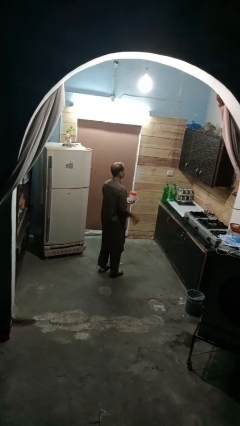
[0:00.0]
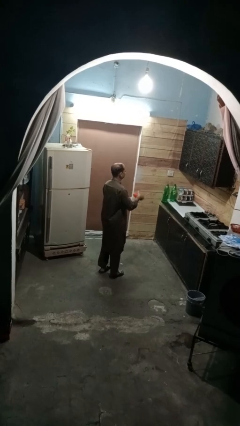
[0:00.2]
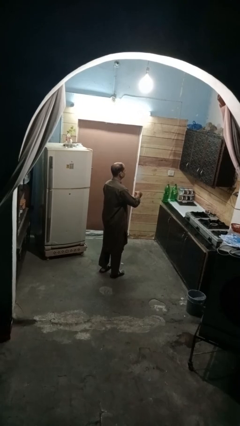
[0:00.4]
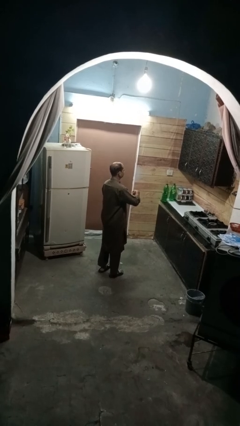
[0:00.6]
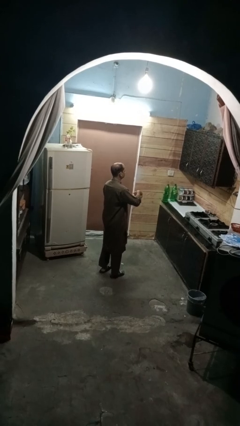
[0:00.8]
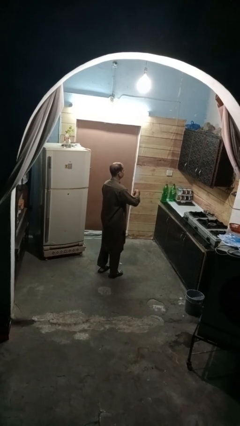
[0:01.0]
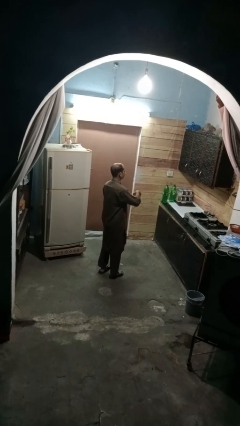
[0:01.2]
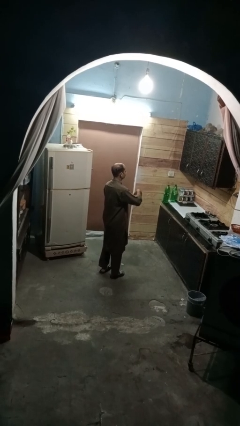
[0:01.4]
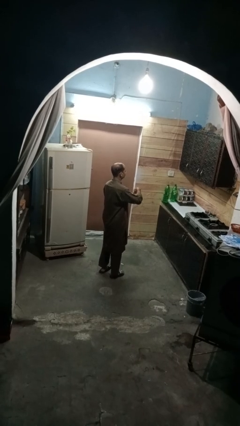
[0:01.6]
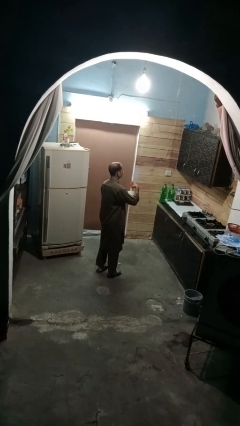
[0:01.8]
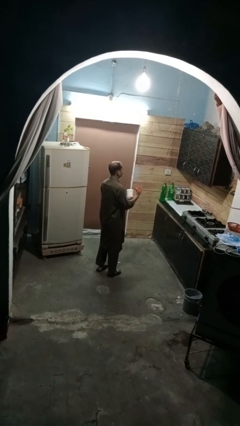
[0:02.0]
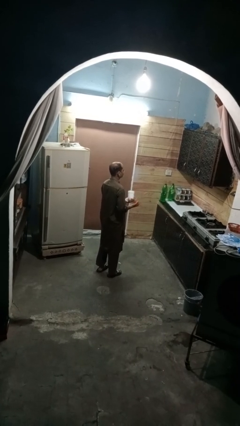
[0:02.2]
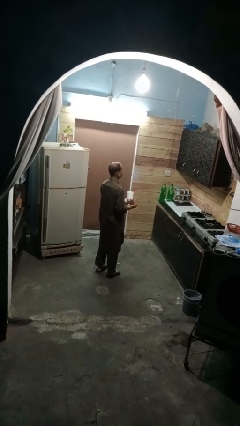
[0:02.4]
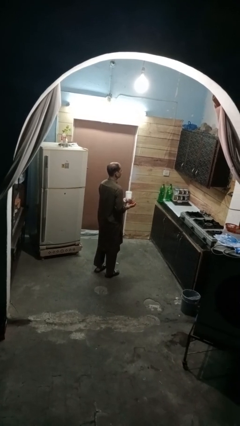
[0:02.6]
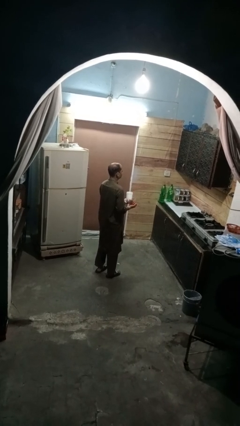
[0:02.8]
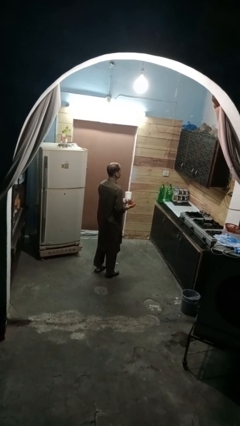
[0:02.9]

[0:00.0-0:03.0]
person opens jar

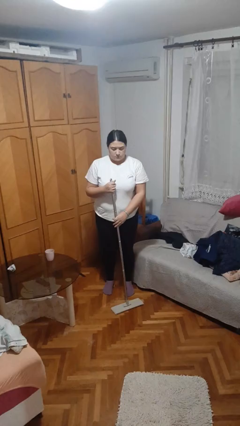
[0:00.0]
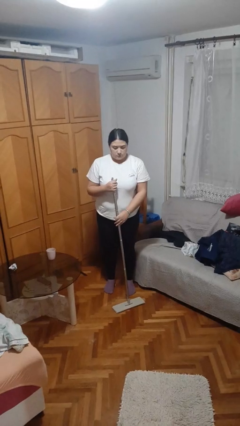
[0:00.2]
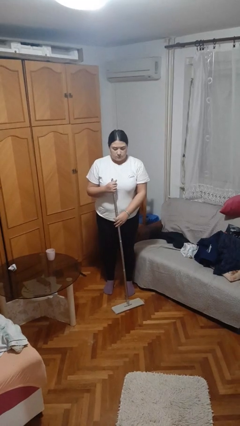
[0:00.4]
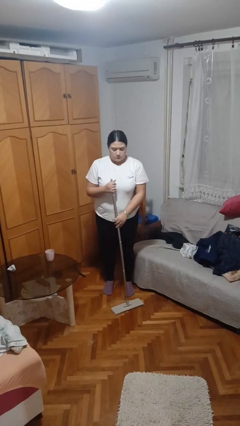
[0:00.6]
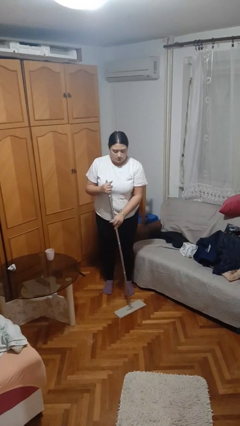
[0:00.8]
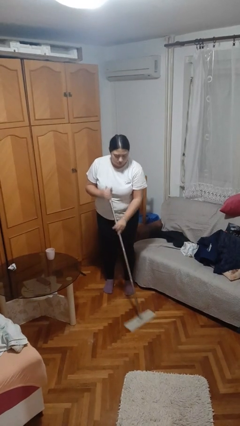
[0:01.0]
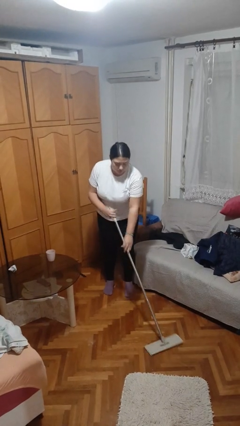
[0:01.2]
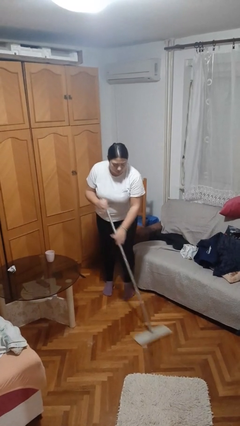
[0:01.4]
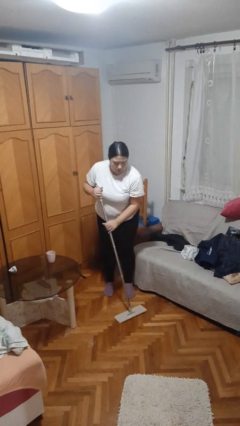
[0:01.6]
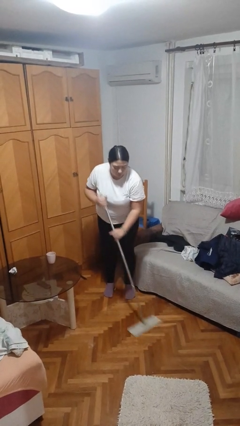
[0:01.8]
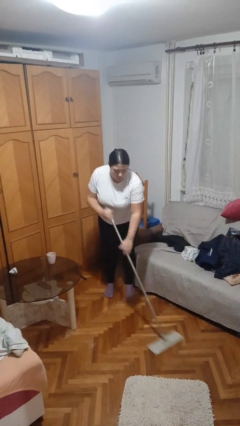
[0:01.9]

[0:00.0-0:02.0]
person mops

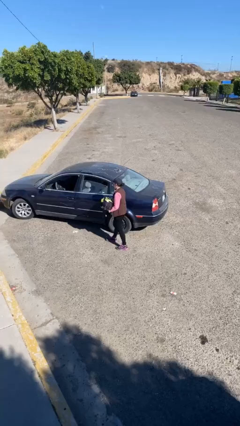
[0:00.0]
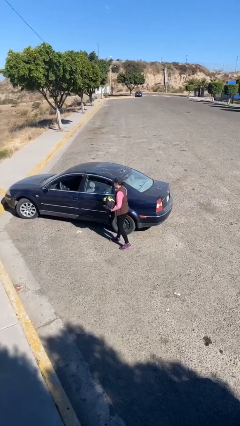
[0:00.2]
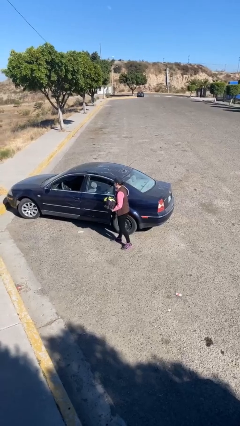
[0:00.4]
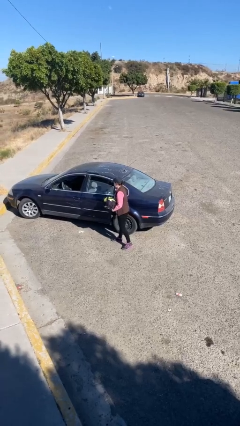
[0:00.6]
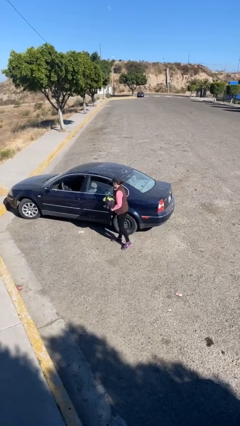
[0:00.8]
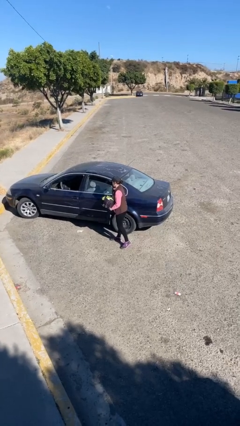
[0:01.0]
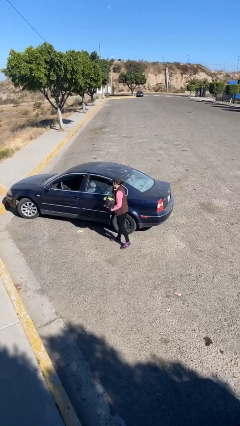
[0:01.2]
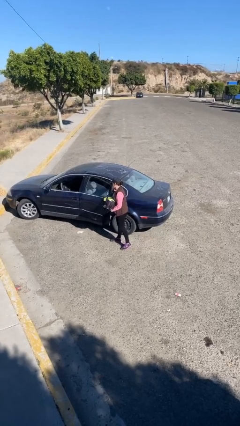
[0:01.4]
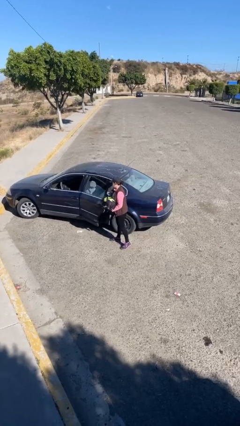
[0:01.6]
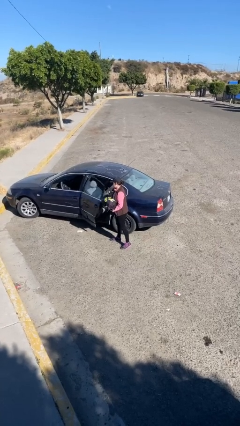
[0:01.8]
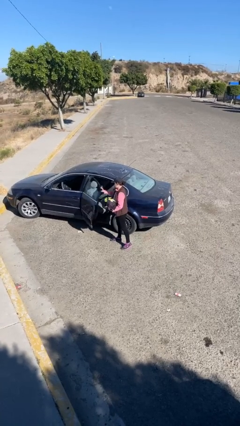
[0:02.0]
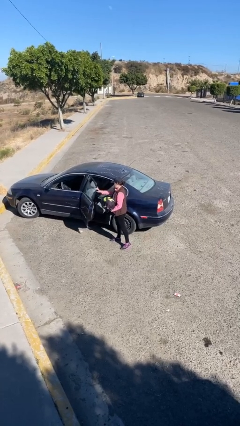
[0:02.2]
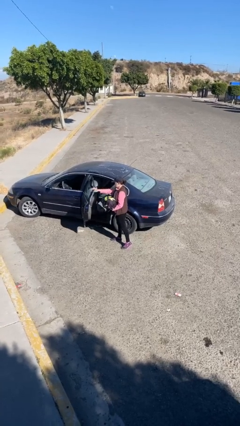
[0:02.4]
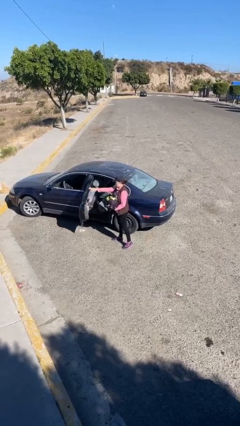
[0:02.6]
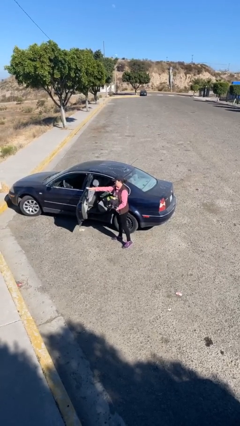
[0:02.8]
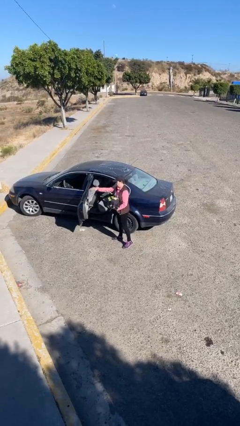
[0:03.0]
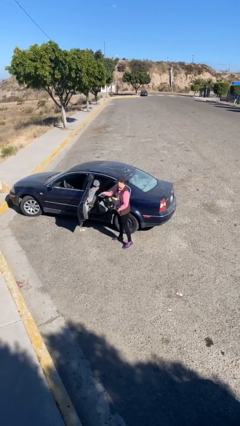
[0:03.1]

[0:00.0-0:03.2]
person opens car door

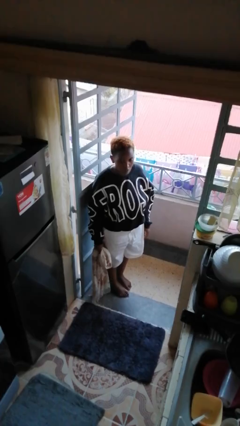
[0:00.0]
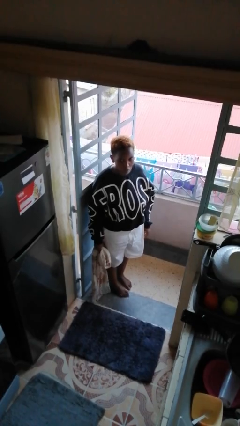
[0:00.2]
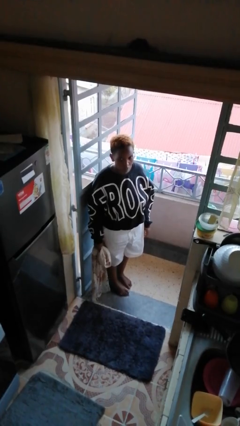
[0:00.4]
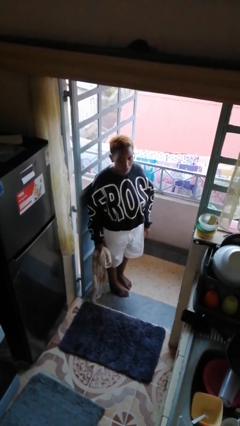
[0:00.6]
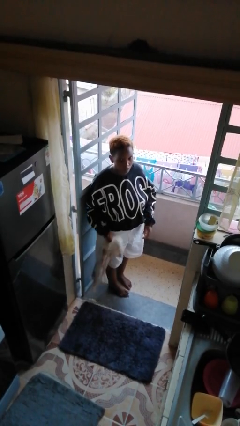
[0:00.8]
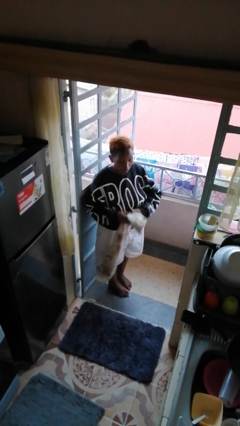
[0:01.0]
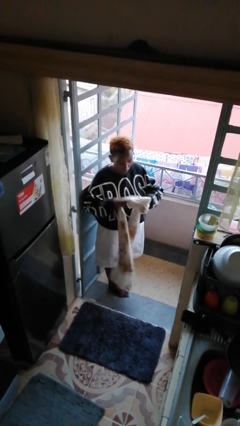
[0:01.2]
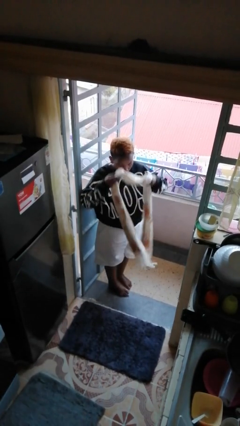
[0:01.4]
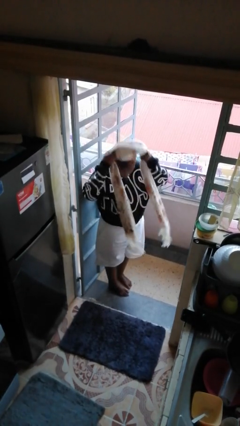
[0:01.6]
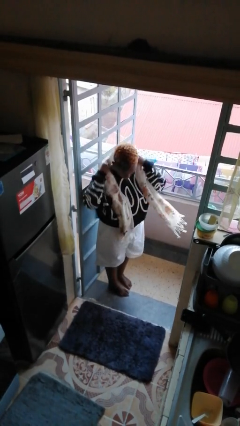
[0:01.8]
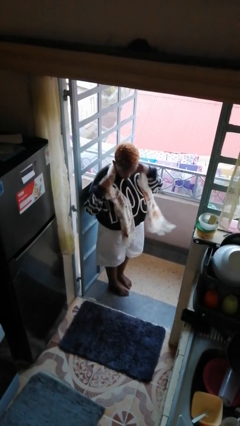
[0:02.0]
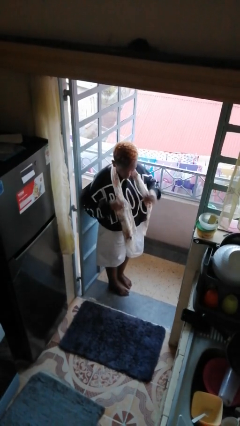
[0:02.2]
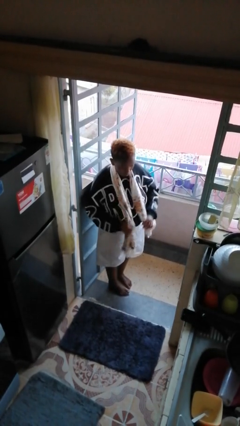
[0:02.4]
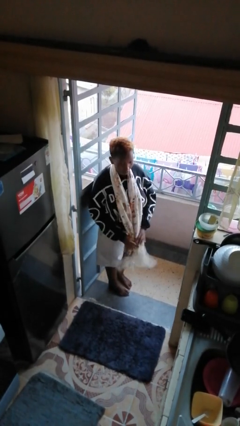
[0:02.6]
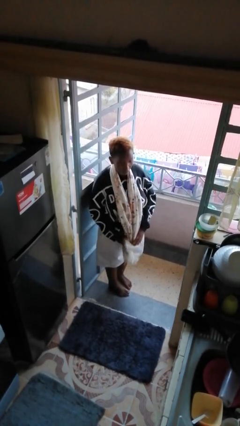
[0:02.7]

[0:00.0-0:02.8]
person puts on scarf

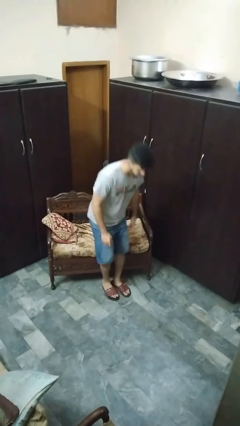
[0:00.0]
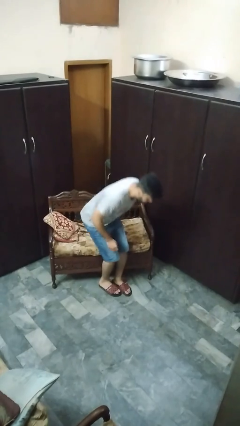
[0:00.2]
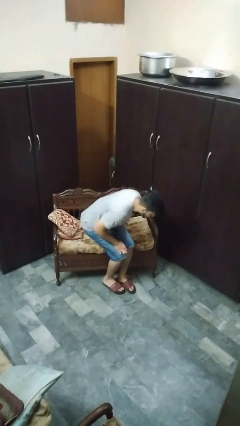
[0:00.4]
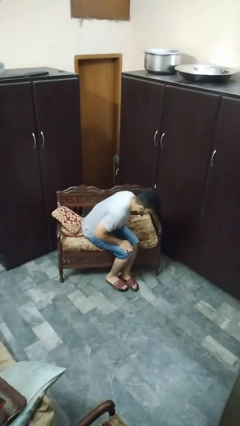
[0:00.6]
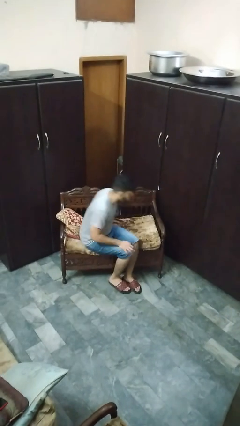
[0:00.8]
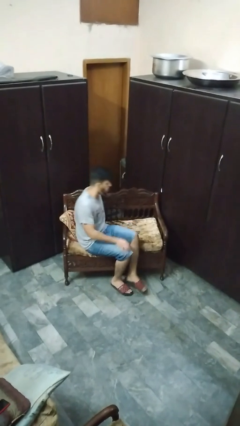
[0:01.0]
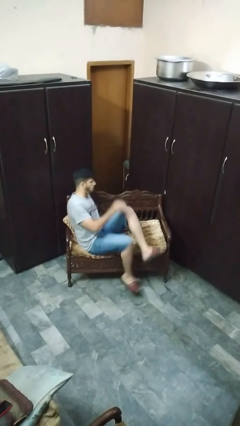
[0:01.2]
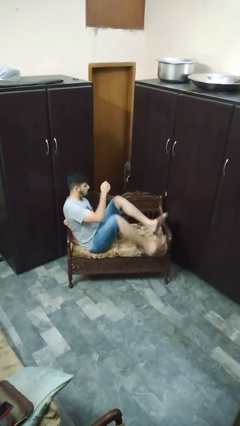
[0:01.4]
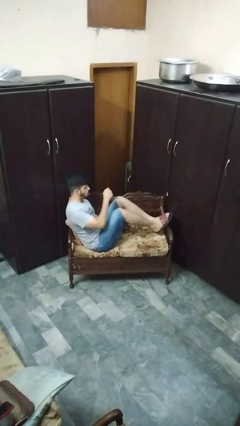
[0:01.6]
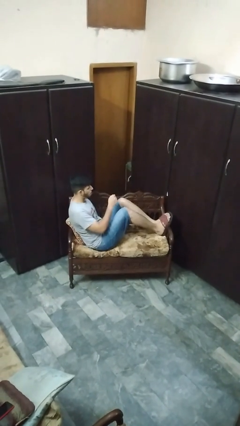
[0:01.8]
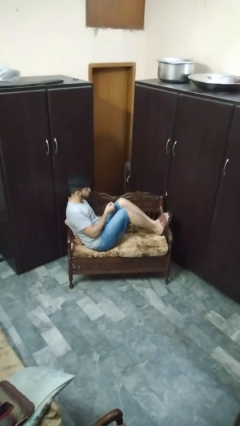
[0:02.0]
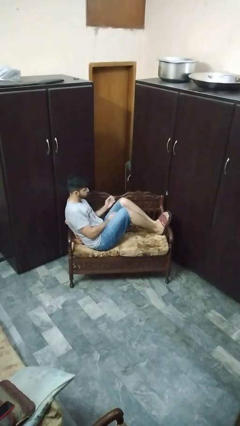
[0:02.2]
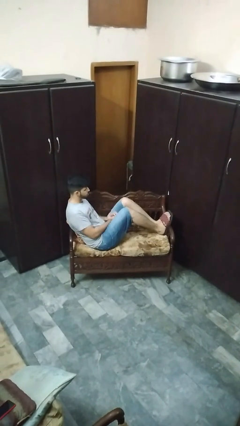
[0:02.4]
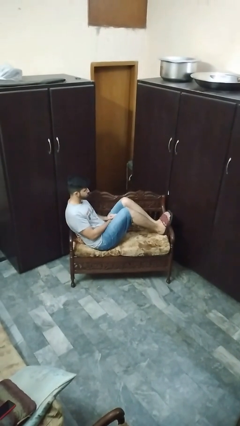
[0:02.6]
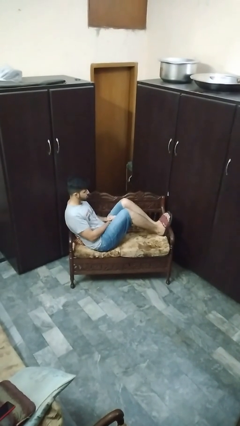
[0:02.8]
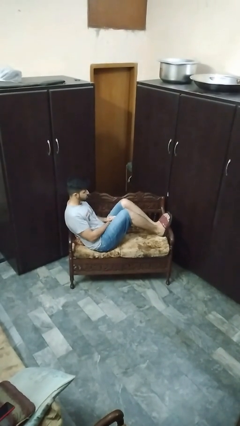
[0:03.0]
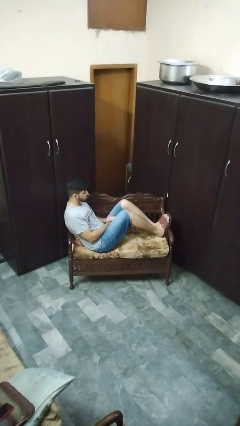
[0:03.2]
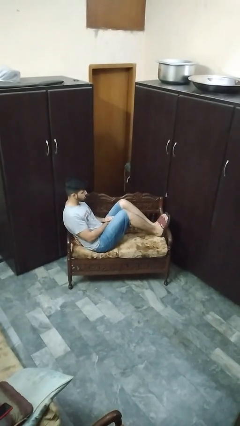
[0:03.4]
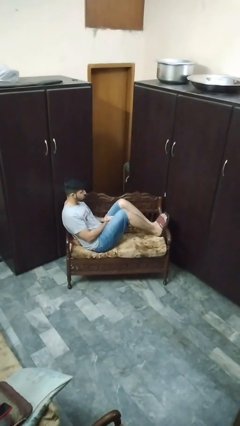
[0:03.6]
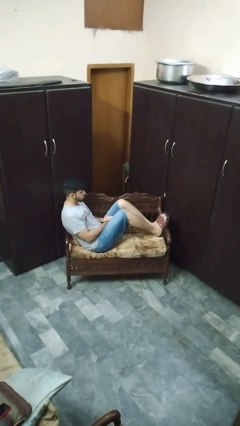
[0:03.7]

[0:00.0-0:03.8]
person lies down on couch

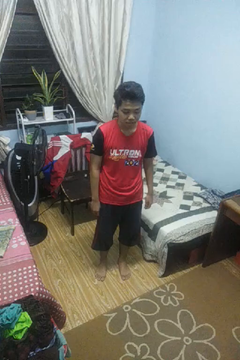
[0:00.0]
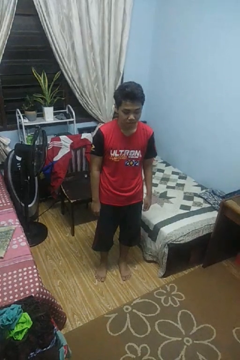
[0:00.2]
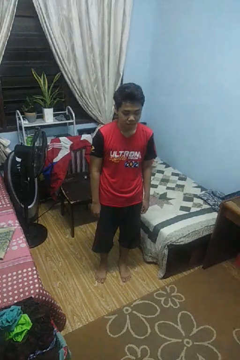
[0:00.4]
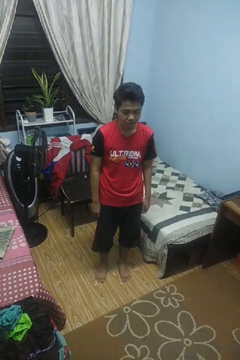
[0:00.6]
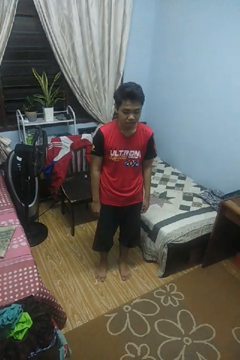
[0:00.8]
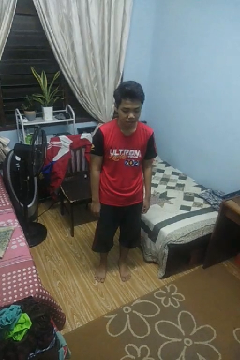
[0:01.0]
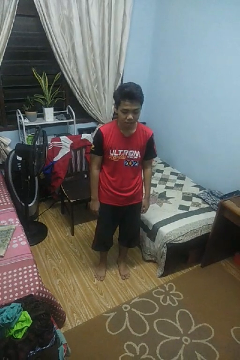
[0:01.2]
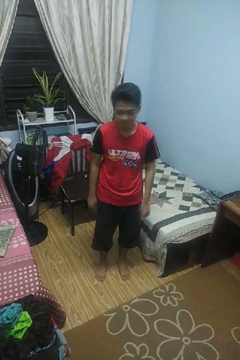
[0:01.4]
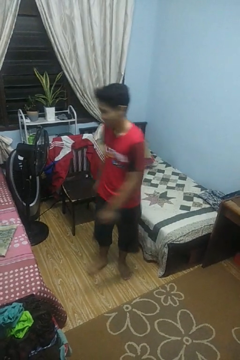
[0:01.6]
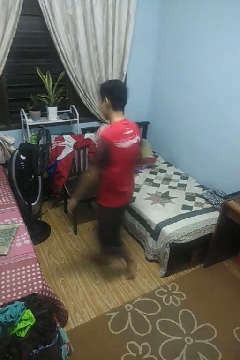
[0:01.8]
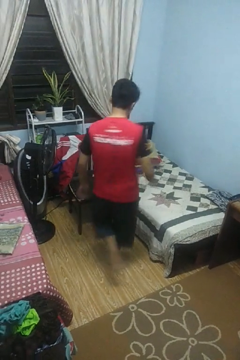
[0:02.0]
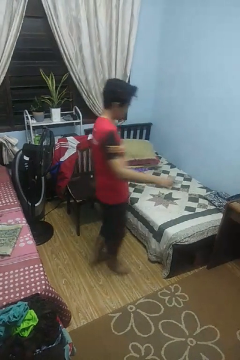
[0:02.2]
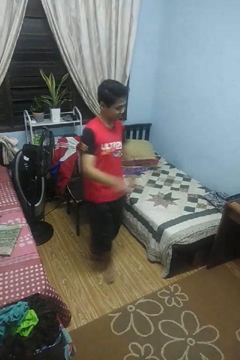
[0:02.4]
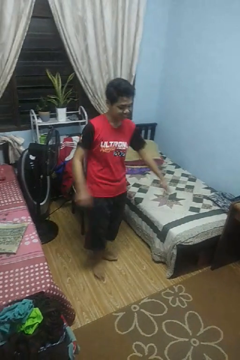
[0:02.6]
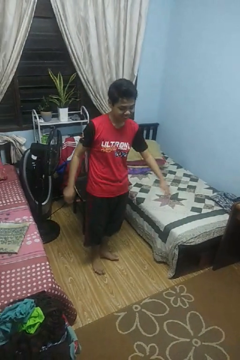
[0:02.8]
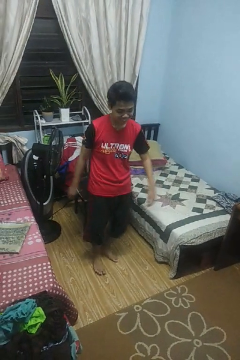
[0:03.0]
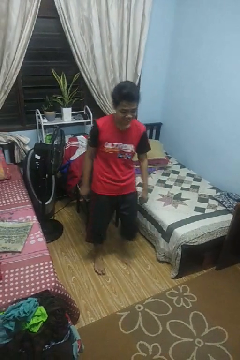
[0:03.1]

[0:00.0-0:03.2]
person twirls

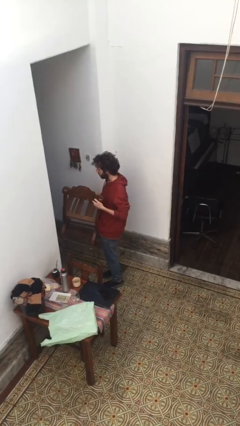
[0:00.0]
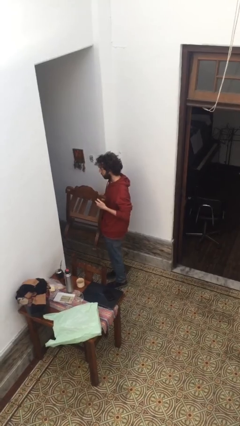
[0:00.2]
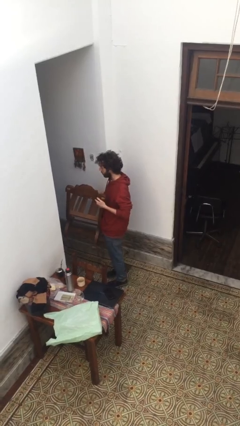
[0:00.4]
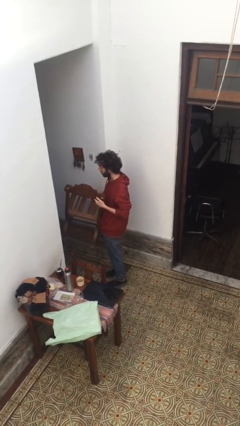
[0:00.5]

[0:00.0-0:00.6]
person carries furniture
